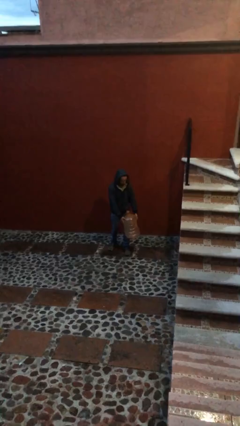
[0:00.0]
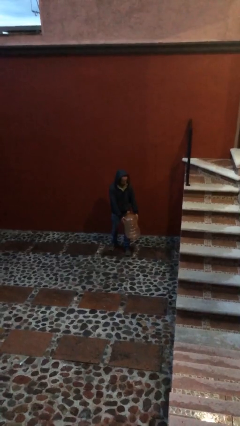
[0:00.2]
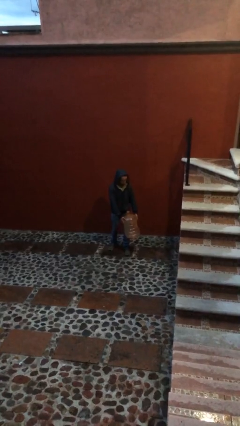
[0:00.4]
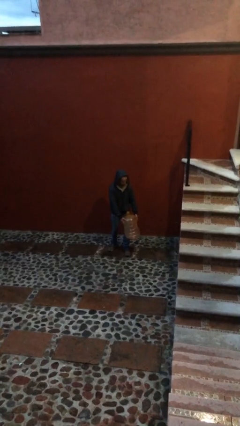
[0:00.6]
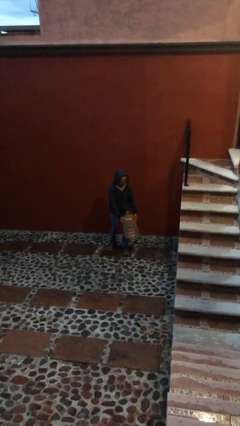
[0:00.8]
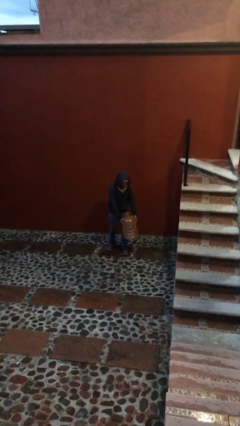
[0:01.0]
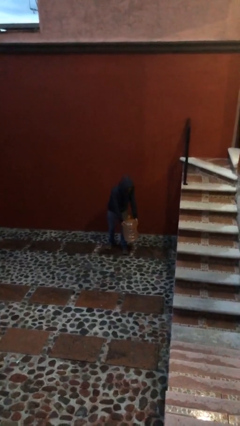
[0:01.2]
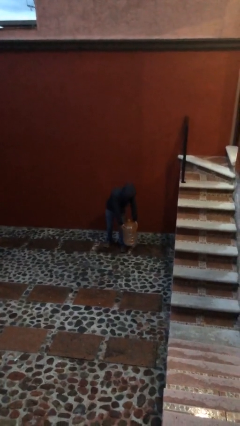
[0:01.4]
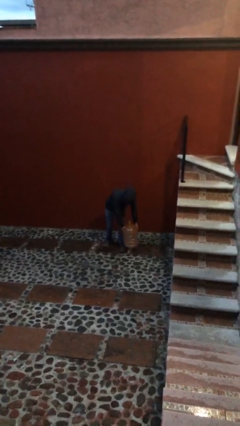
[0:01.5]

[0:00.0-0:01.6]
person puts down object on floor

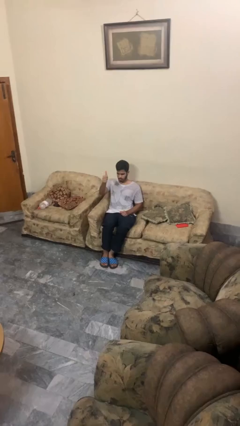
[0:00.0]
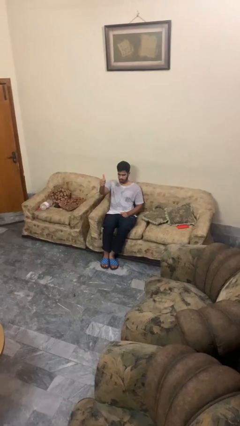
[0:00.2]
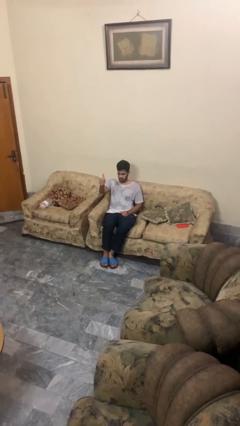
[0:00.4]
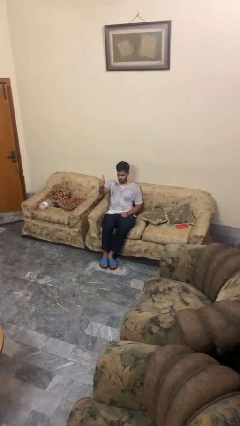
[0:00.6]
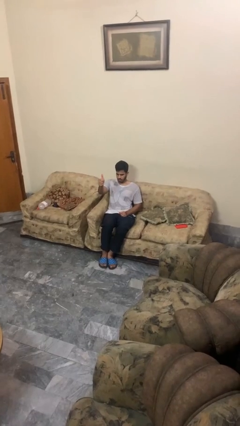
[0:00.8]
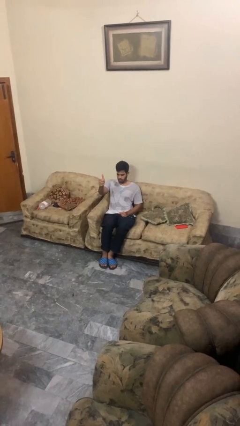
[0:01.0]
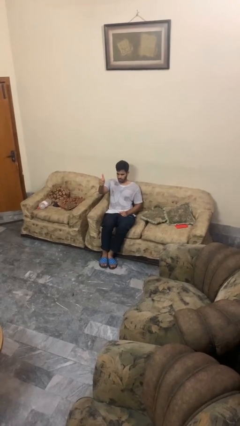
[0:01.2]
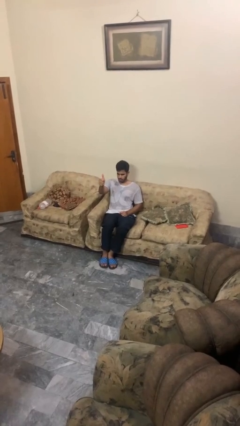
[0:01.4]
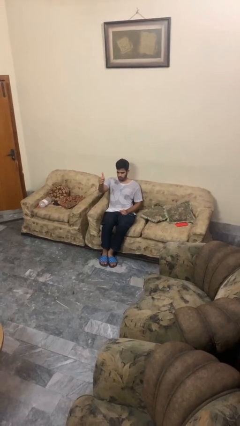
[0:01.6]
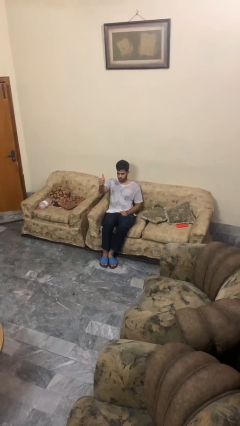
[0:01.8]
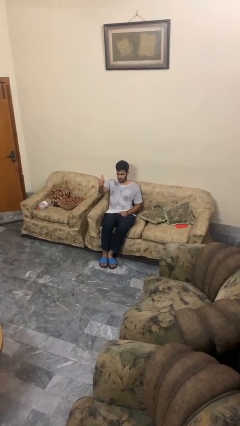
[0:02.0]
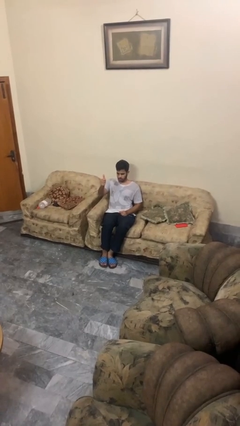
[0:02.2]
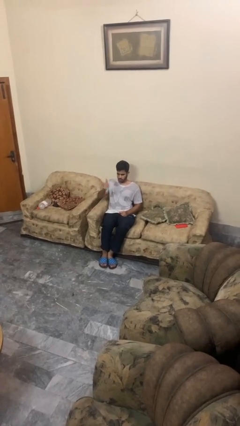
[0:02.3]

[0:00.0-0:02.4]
person gestures thumbs up

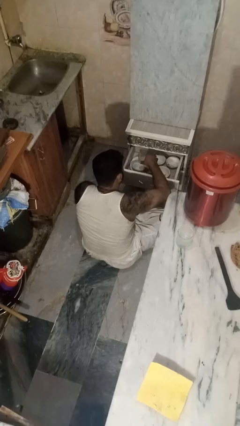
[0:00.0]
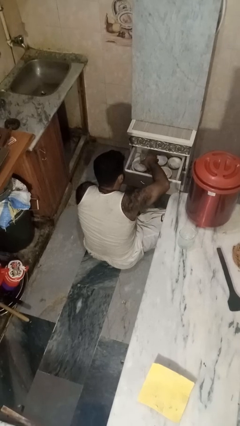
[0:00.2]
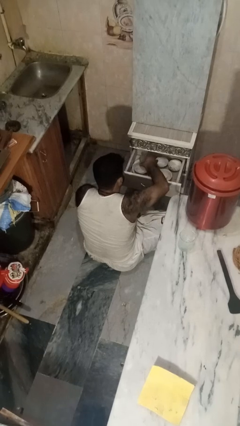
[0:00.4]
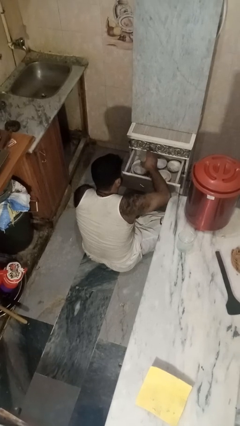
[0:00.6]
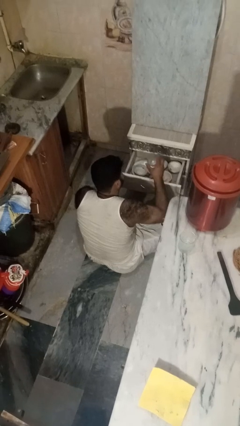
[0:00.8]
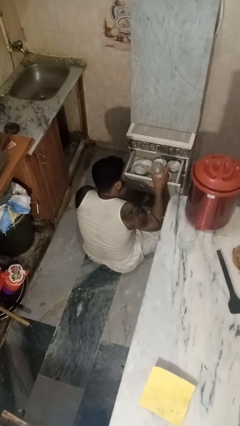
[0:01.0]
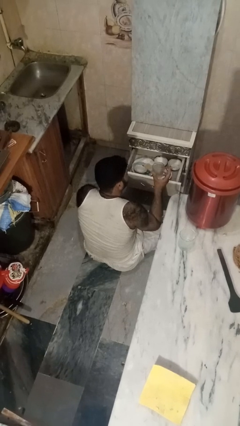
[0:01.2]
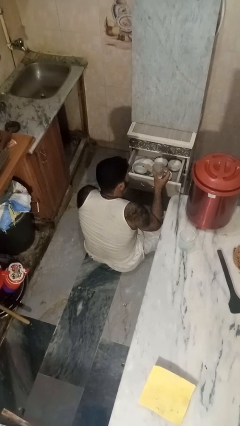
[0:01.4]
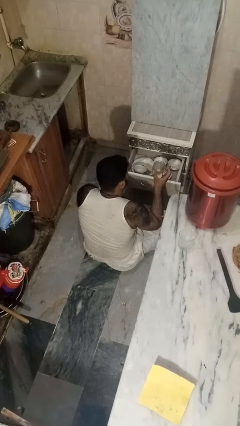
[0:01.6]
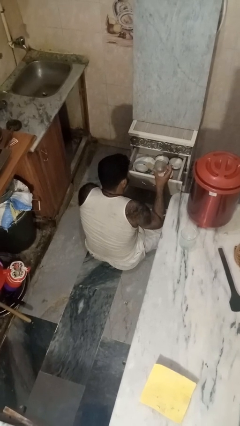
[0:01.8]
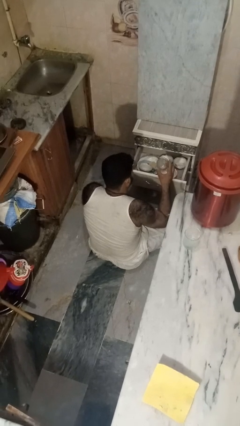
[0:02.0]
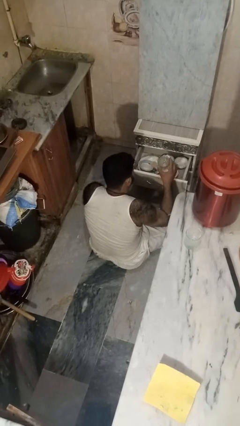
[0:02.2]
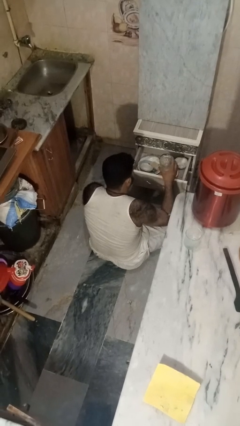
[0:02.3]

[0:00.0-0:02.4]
person takes object from kitchen drawer

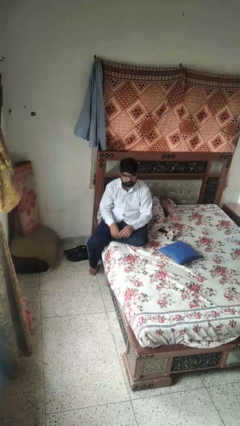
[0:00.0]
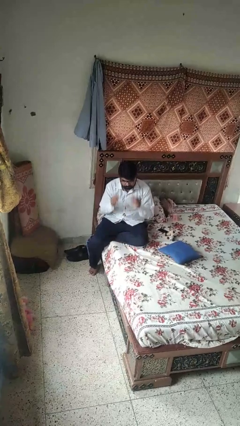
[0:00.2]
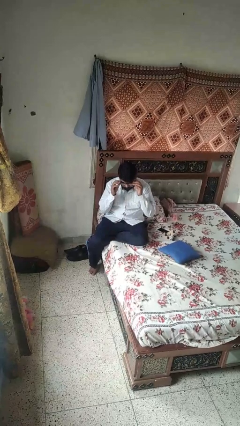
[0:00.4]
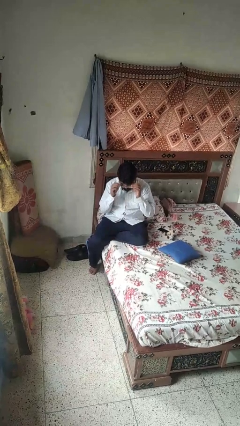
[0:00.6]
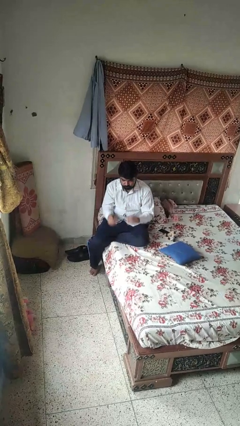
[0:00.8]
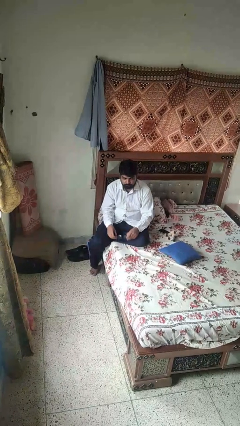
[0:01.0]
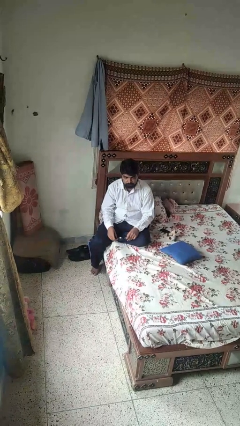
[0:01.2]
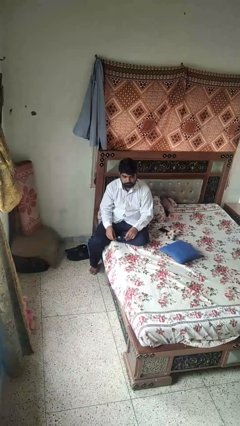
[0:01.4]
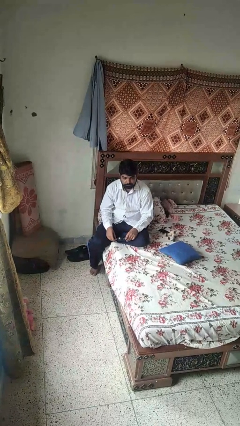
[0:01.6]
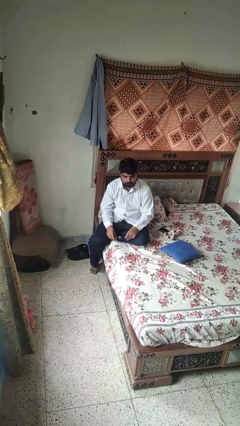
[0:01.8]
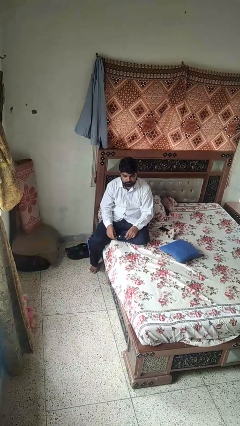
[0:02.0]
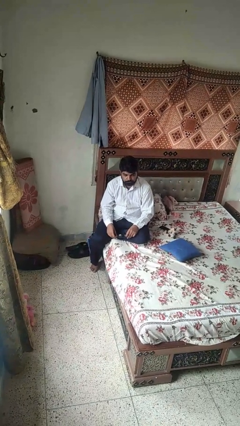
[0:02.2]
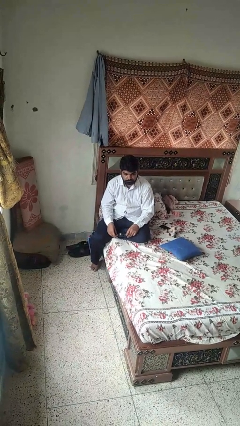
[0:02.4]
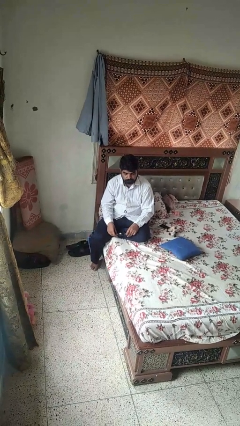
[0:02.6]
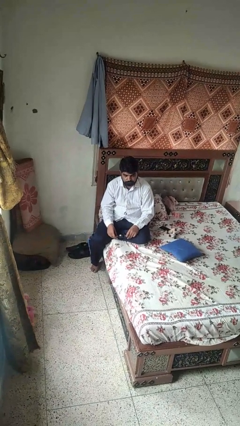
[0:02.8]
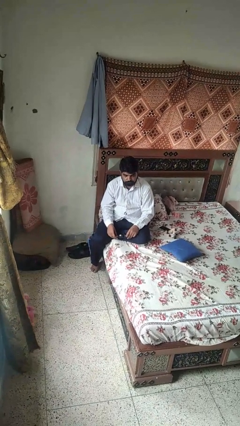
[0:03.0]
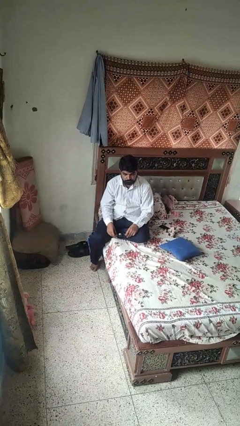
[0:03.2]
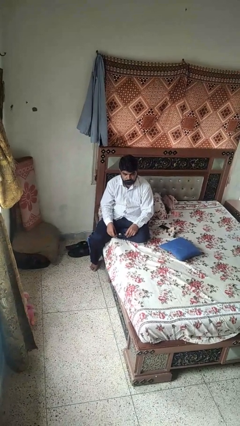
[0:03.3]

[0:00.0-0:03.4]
person takes off glasses

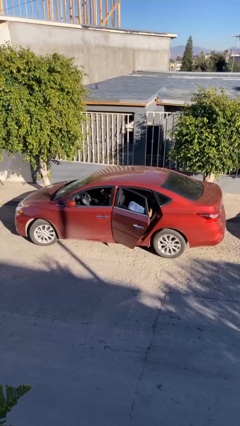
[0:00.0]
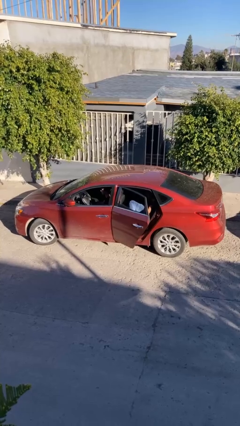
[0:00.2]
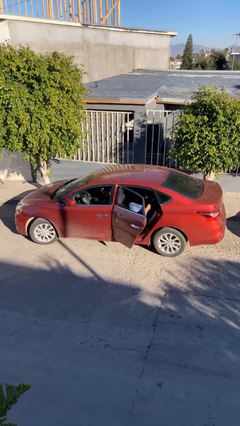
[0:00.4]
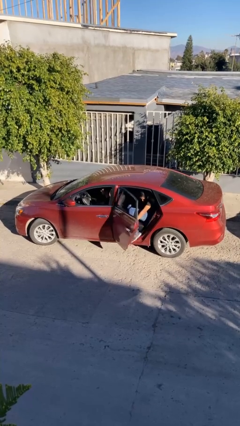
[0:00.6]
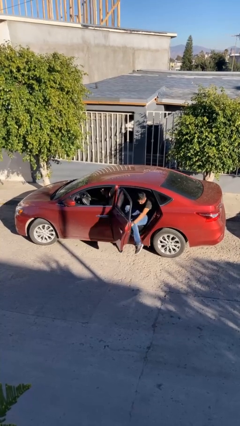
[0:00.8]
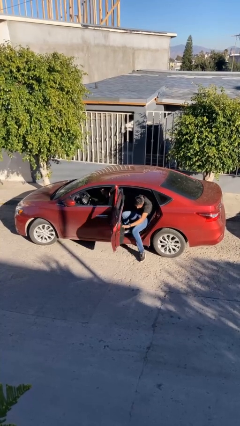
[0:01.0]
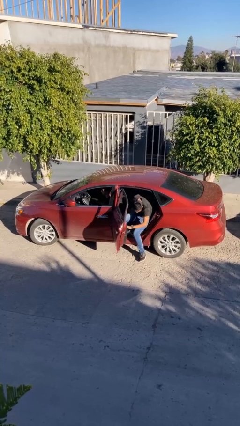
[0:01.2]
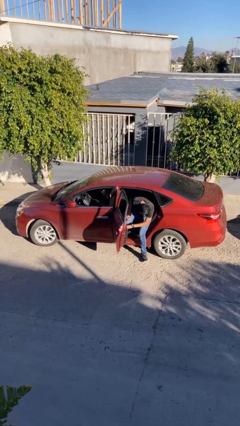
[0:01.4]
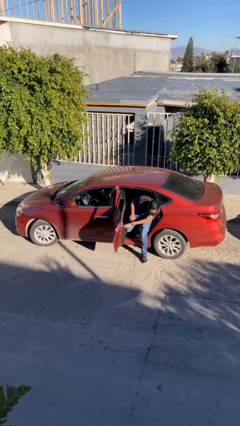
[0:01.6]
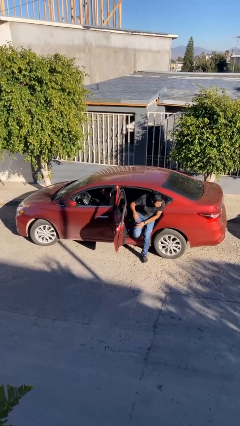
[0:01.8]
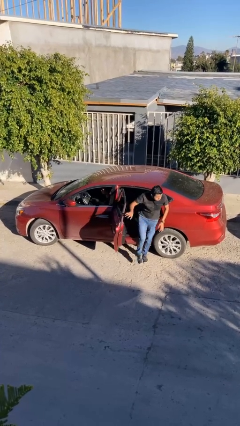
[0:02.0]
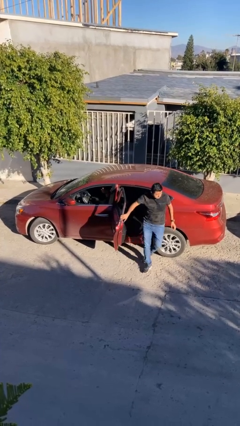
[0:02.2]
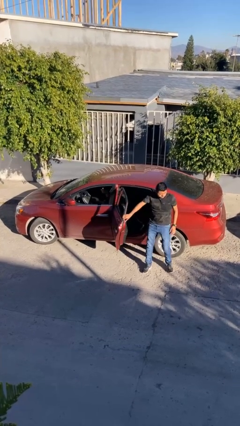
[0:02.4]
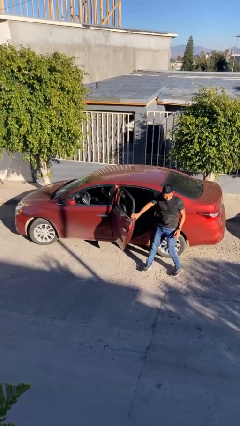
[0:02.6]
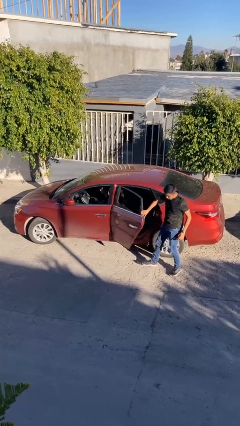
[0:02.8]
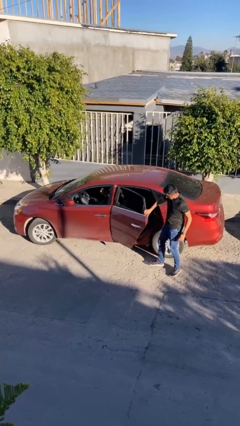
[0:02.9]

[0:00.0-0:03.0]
car drops off person

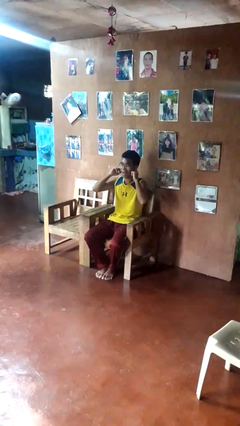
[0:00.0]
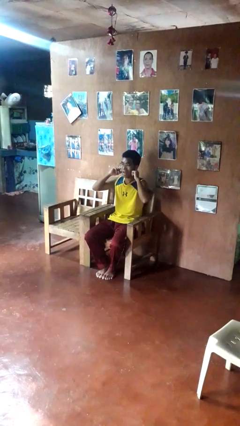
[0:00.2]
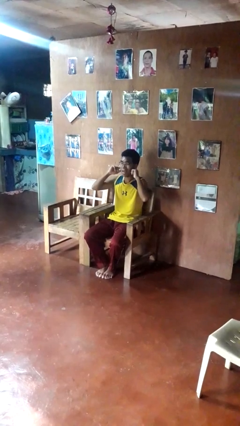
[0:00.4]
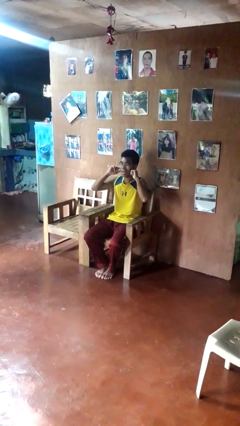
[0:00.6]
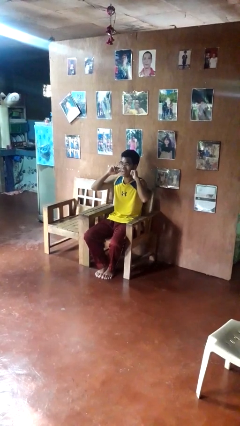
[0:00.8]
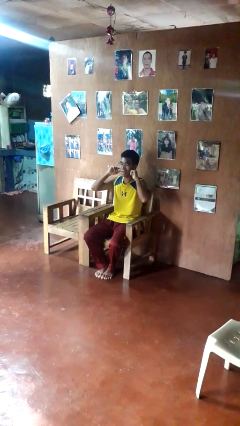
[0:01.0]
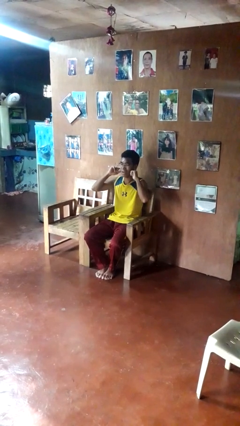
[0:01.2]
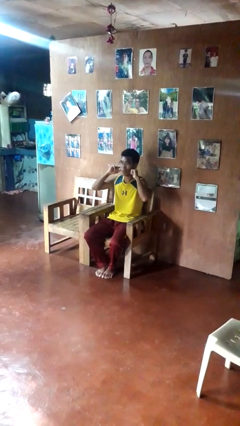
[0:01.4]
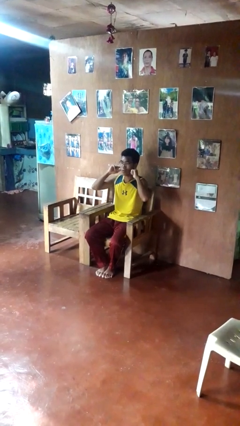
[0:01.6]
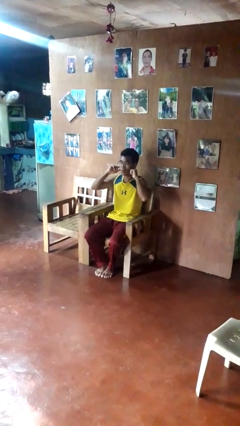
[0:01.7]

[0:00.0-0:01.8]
person puts fingers in ear

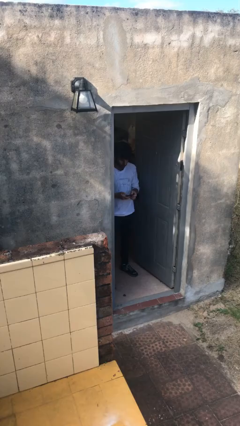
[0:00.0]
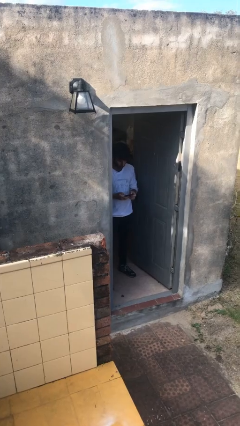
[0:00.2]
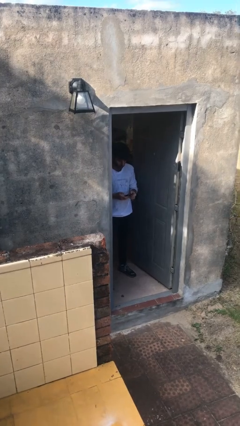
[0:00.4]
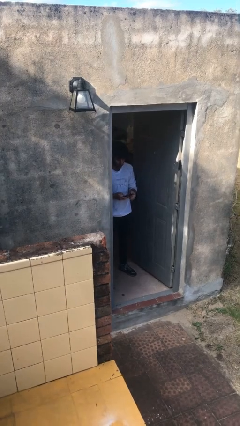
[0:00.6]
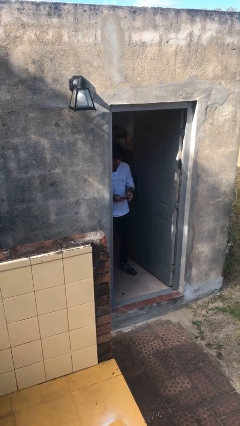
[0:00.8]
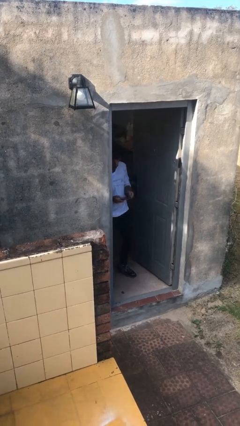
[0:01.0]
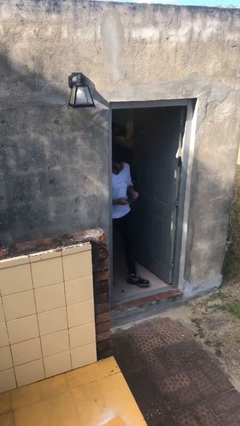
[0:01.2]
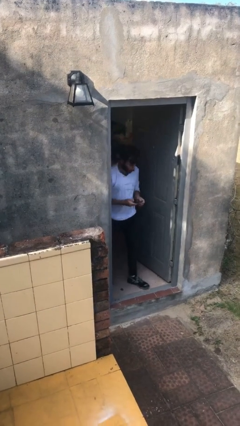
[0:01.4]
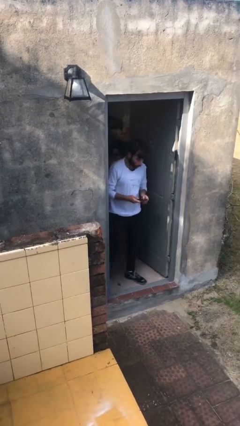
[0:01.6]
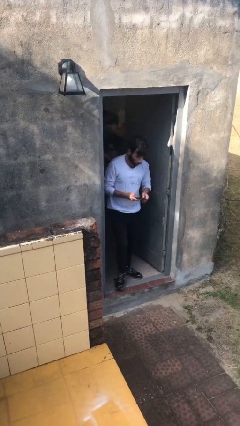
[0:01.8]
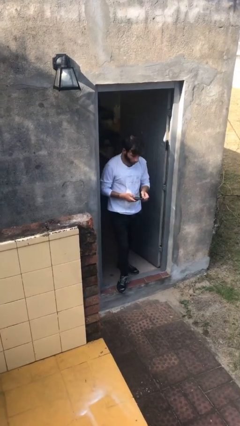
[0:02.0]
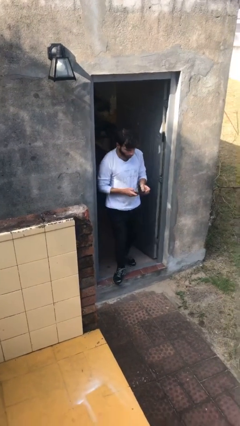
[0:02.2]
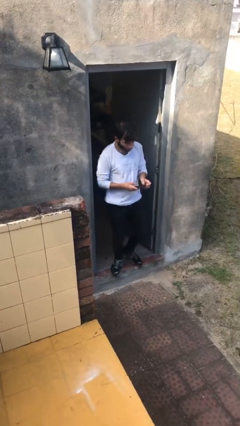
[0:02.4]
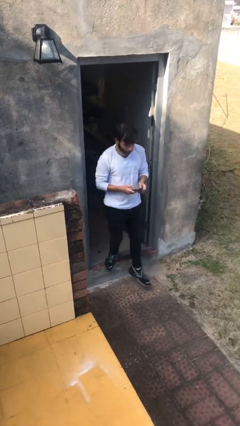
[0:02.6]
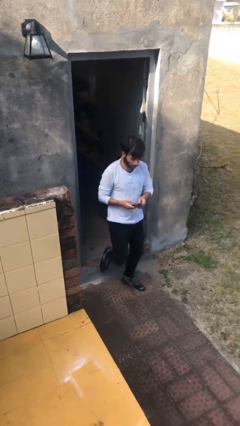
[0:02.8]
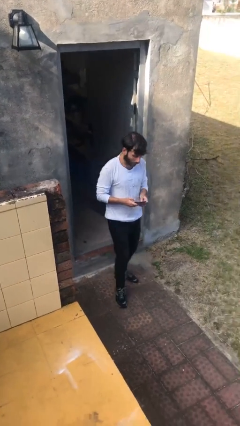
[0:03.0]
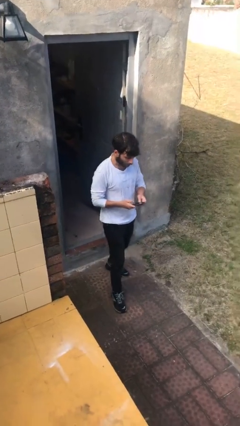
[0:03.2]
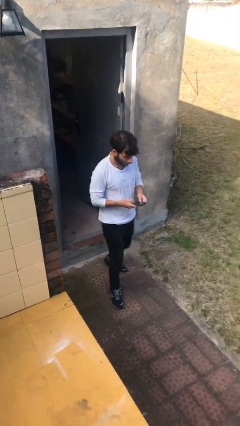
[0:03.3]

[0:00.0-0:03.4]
person enters scene through structure
